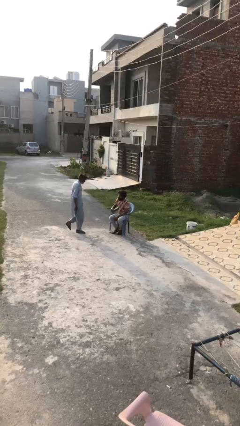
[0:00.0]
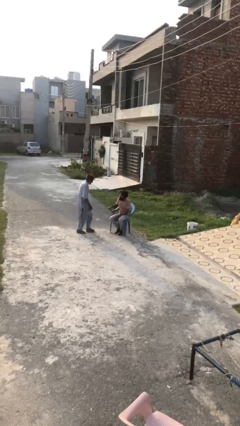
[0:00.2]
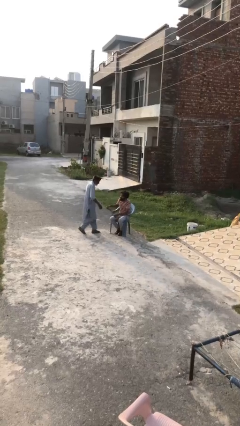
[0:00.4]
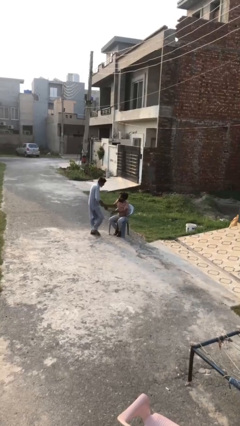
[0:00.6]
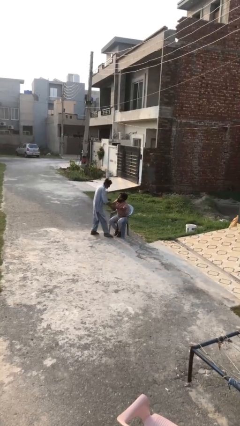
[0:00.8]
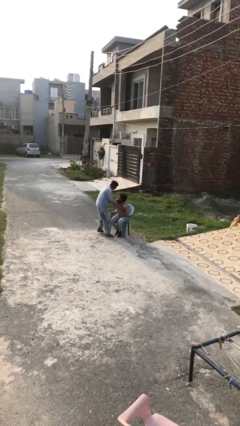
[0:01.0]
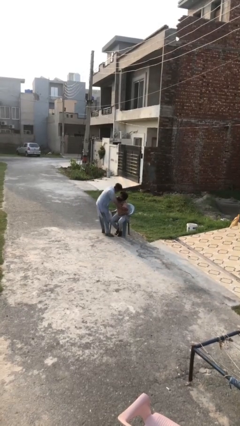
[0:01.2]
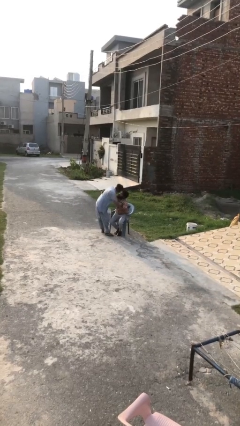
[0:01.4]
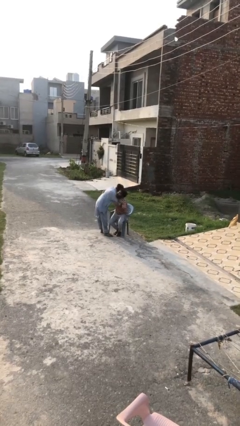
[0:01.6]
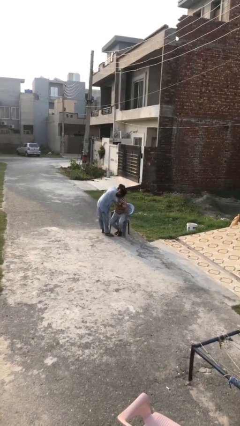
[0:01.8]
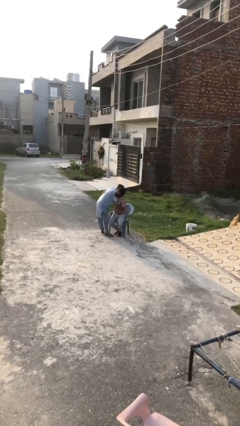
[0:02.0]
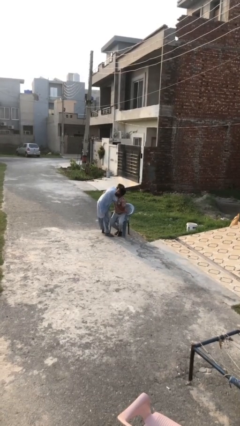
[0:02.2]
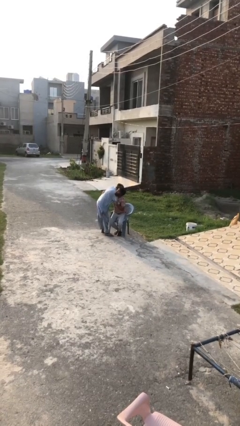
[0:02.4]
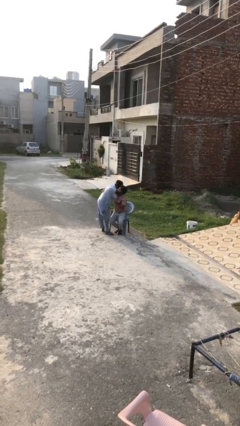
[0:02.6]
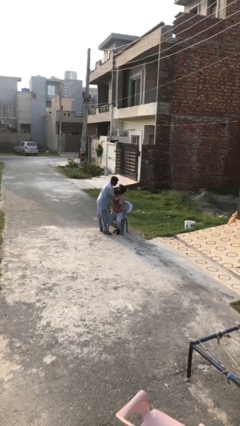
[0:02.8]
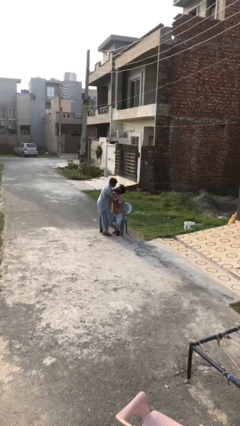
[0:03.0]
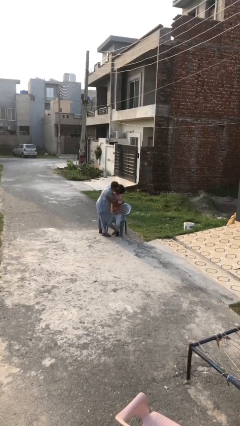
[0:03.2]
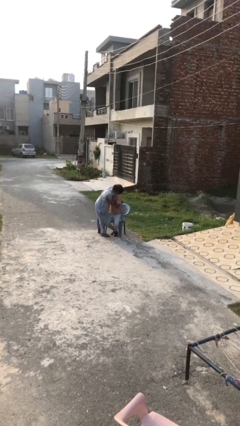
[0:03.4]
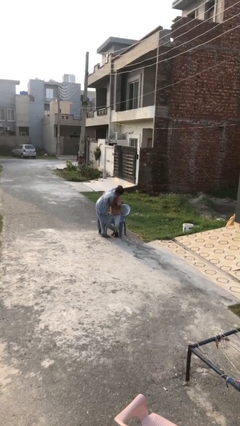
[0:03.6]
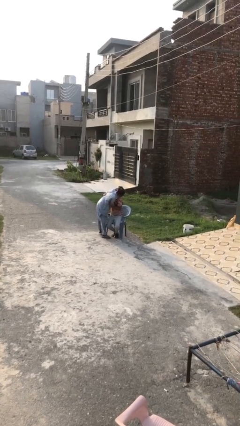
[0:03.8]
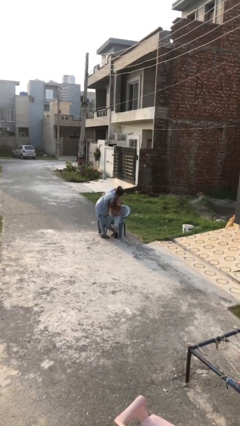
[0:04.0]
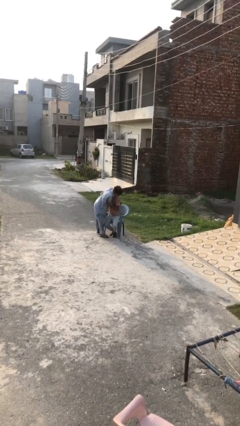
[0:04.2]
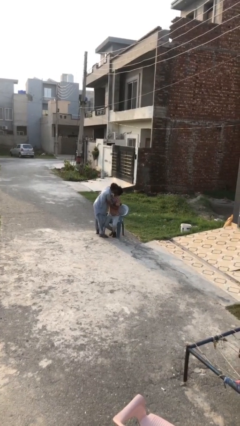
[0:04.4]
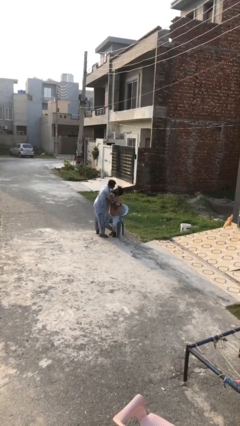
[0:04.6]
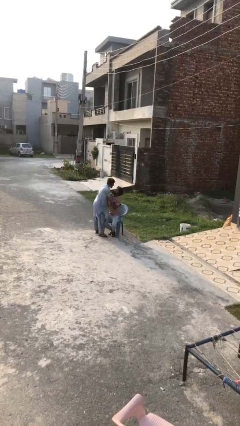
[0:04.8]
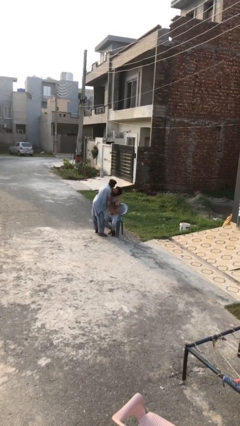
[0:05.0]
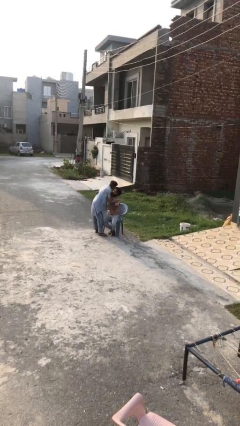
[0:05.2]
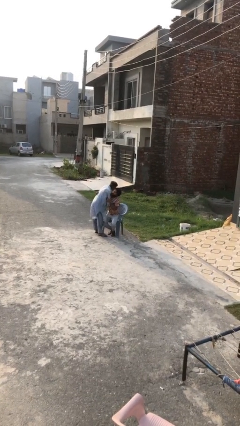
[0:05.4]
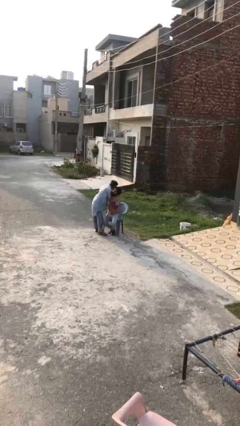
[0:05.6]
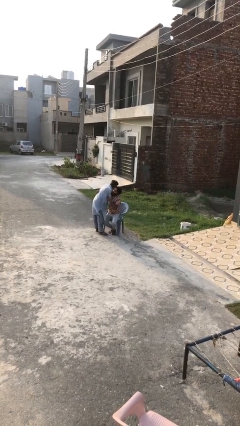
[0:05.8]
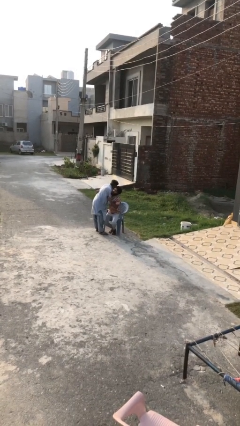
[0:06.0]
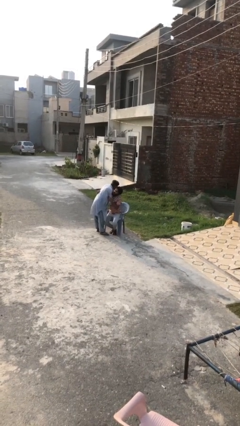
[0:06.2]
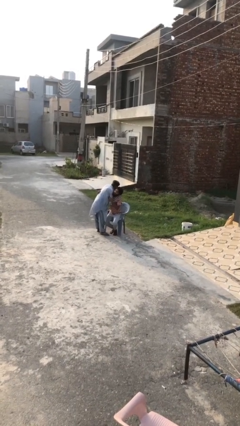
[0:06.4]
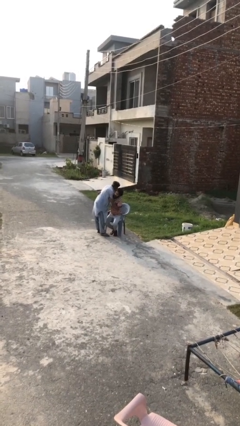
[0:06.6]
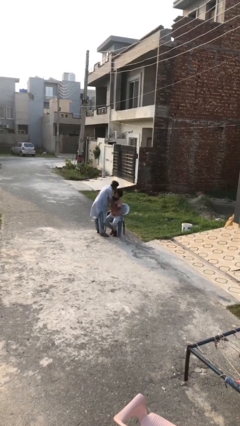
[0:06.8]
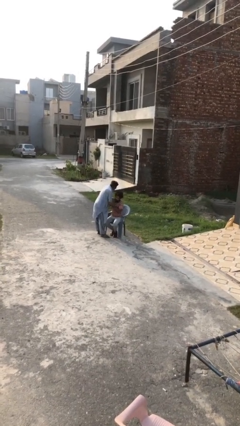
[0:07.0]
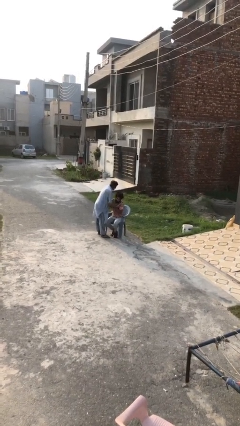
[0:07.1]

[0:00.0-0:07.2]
person embraces person

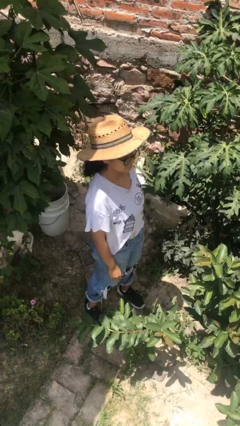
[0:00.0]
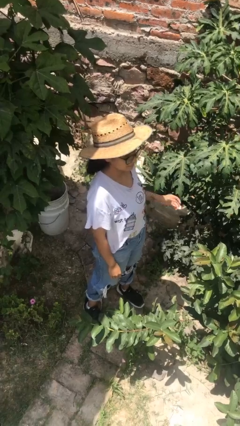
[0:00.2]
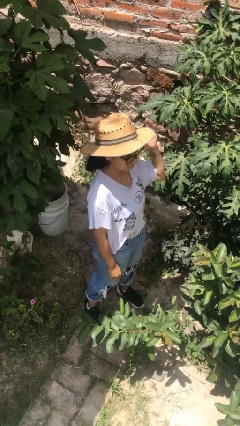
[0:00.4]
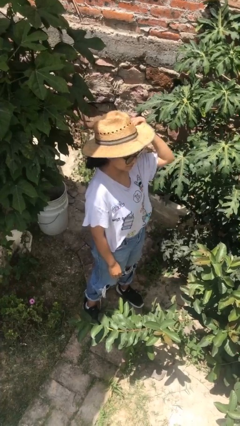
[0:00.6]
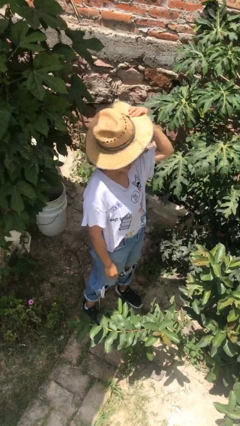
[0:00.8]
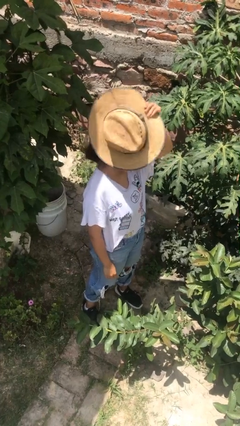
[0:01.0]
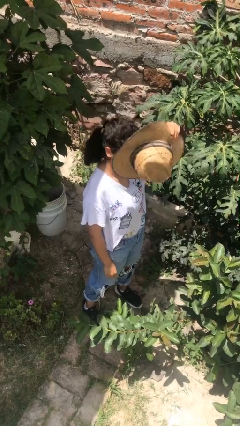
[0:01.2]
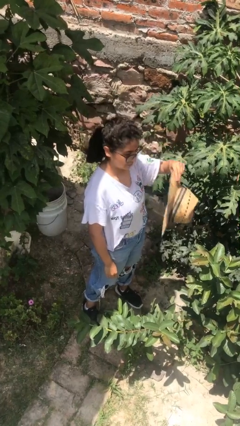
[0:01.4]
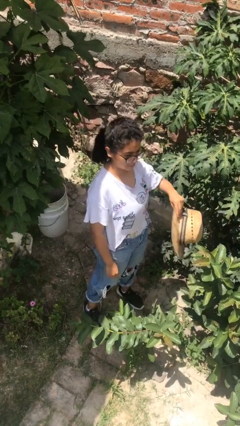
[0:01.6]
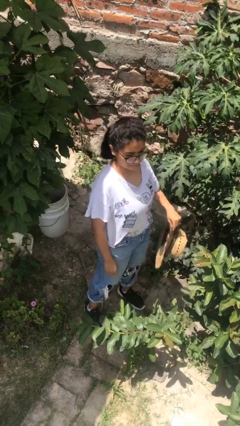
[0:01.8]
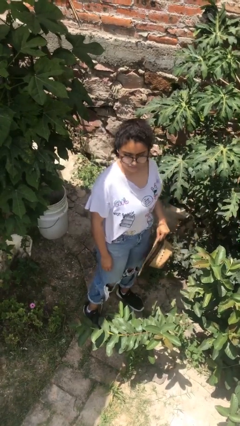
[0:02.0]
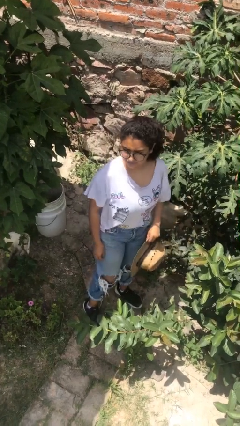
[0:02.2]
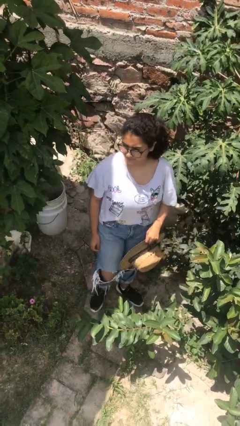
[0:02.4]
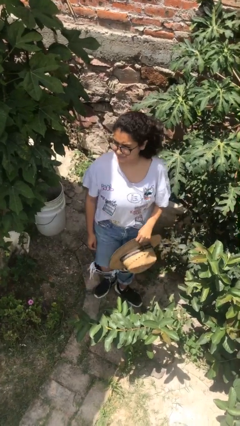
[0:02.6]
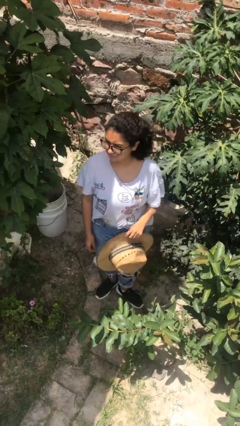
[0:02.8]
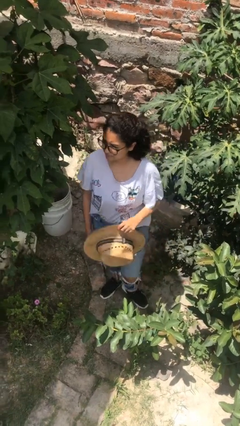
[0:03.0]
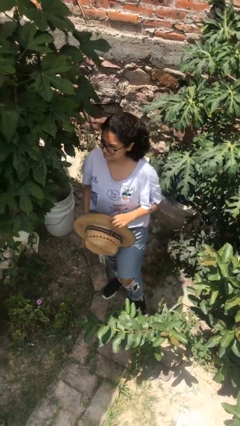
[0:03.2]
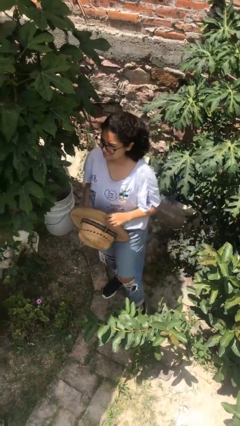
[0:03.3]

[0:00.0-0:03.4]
person takes off hat

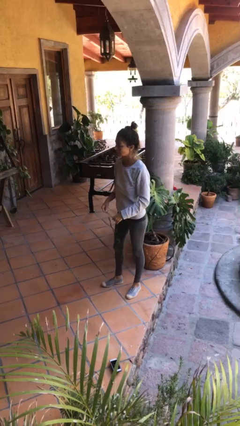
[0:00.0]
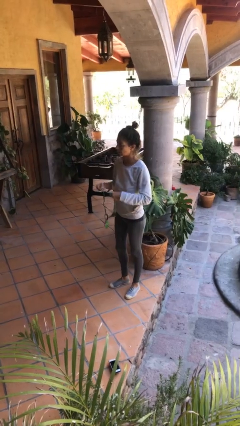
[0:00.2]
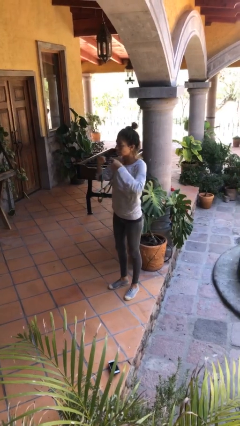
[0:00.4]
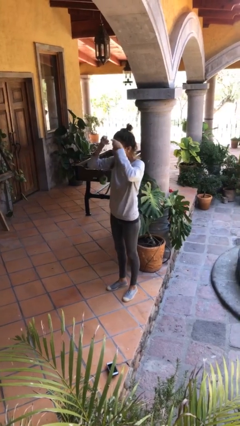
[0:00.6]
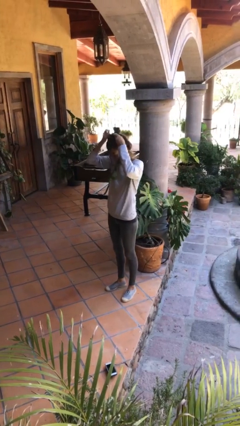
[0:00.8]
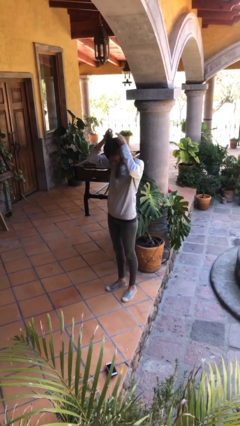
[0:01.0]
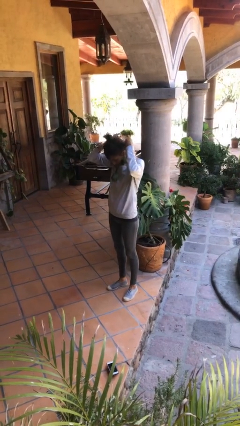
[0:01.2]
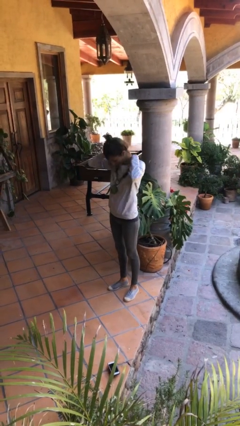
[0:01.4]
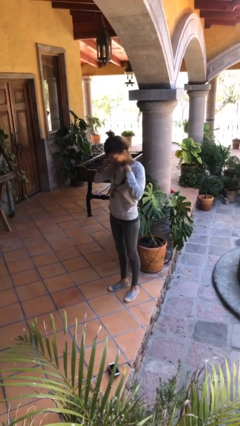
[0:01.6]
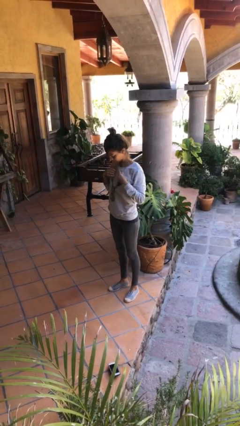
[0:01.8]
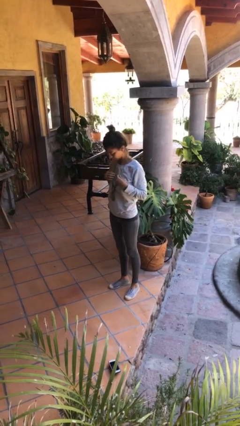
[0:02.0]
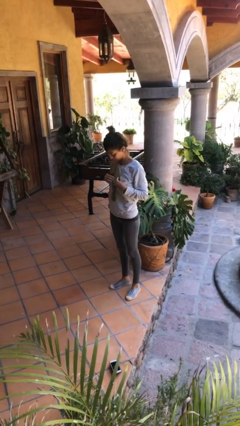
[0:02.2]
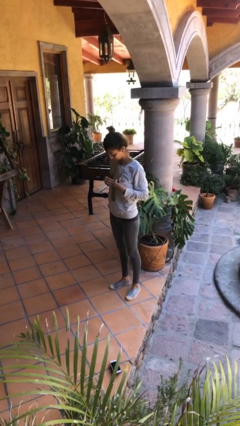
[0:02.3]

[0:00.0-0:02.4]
person puts on necklace

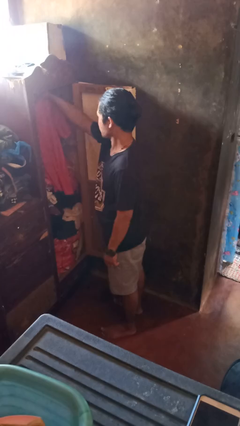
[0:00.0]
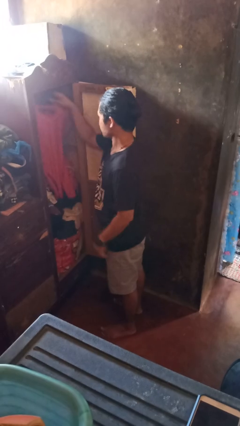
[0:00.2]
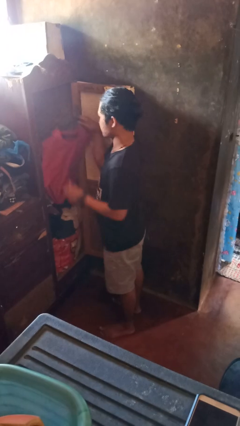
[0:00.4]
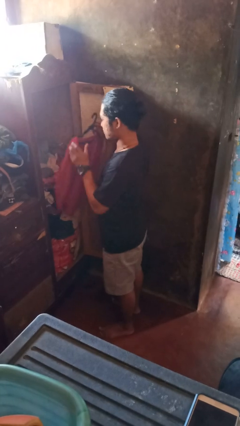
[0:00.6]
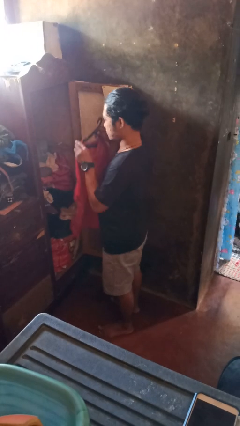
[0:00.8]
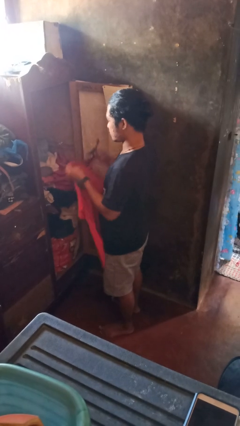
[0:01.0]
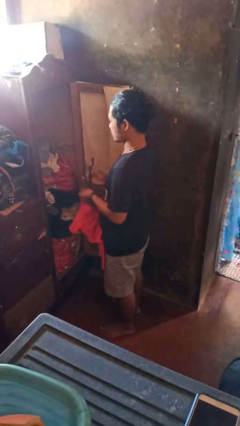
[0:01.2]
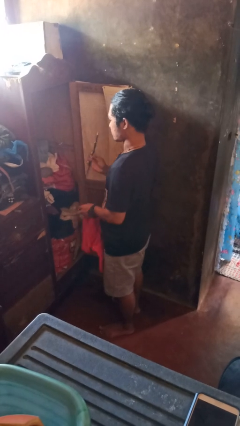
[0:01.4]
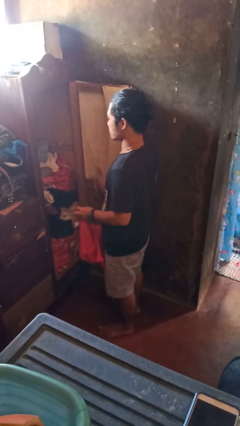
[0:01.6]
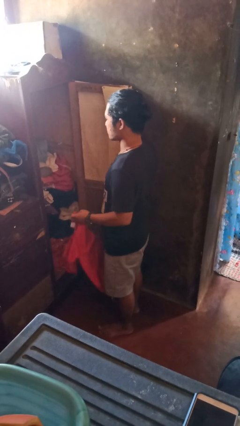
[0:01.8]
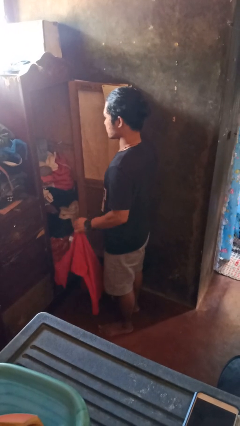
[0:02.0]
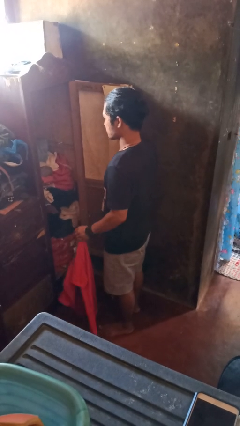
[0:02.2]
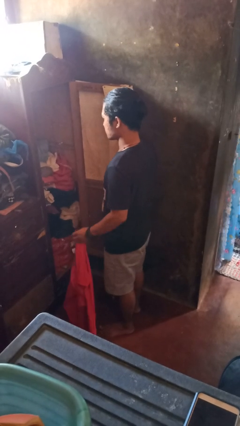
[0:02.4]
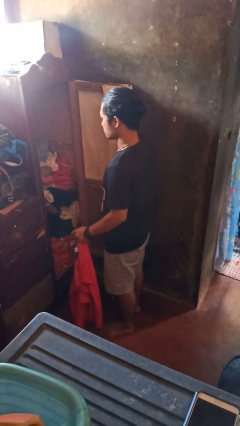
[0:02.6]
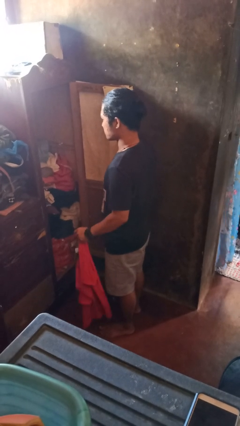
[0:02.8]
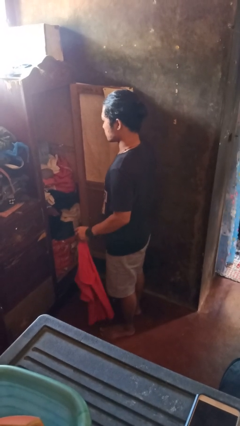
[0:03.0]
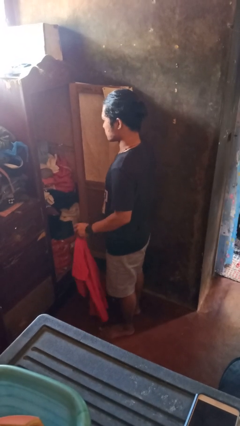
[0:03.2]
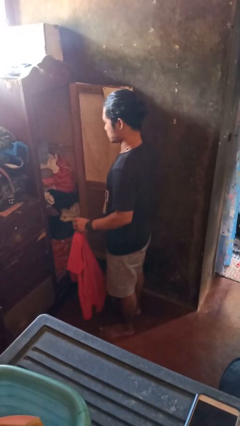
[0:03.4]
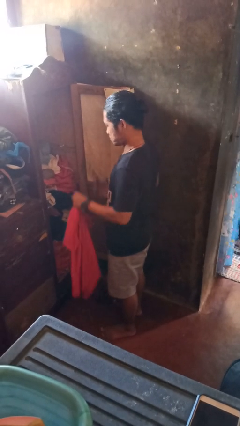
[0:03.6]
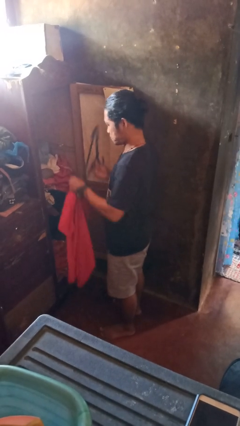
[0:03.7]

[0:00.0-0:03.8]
person takes clothes from closet

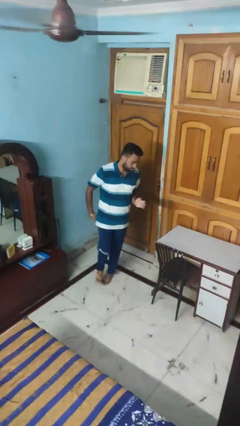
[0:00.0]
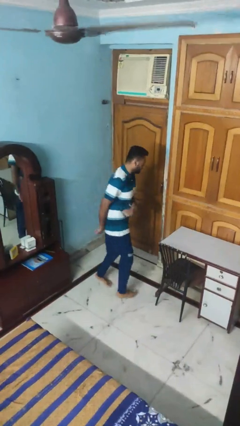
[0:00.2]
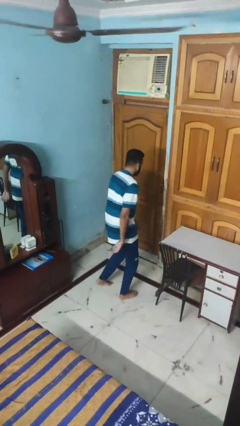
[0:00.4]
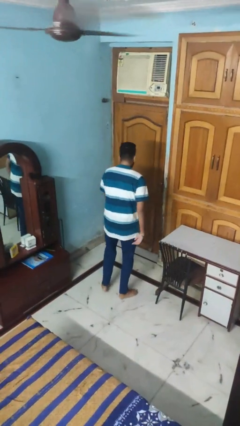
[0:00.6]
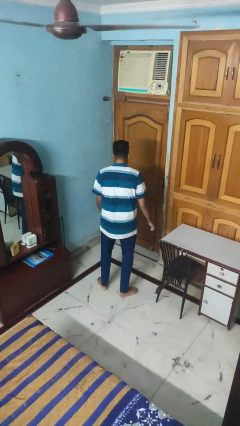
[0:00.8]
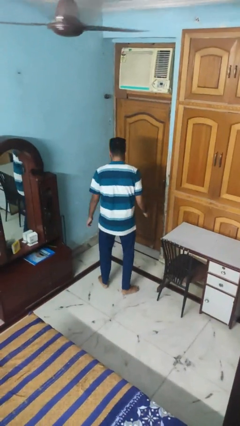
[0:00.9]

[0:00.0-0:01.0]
person twirls
